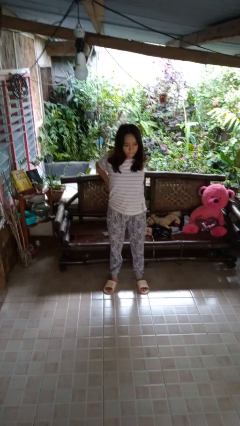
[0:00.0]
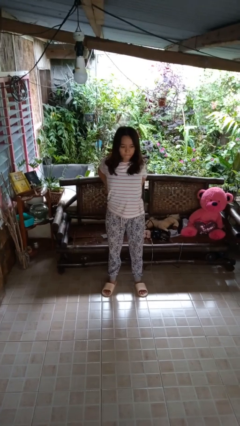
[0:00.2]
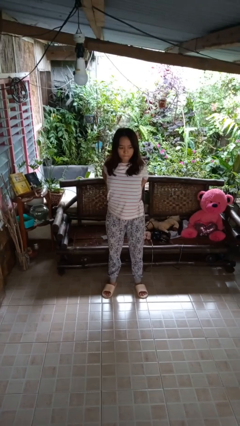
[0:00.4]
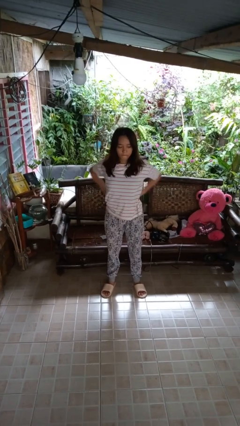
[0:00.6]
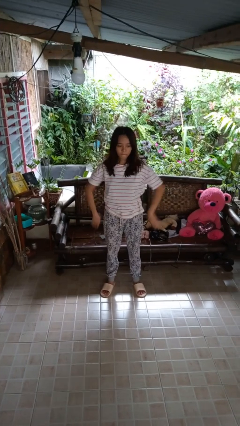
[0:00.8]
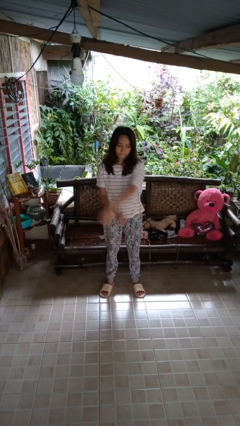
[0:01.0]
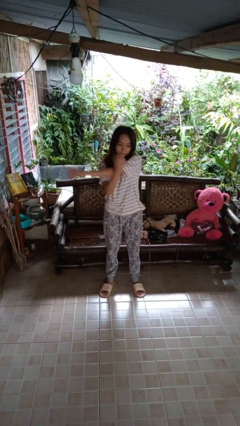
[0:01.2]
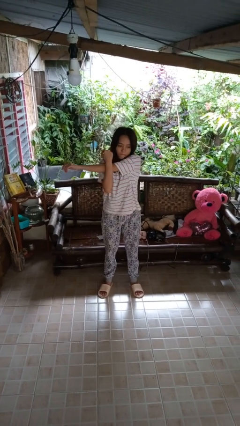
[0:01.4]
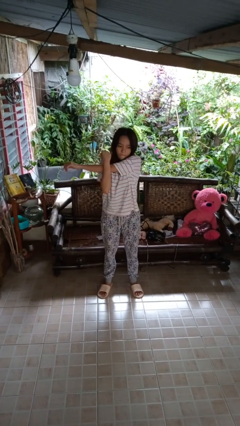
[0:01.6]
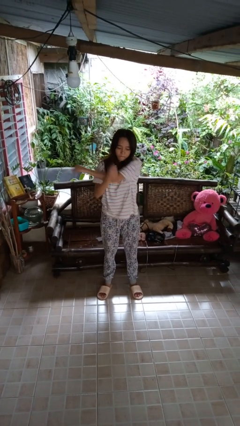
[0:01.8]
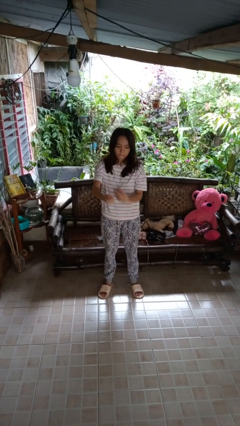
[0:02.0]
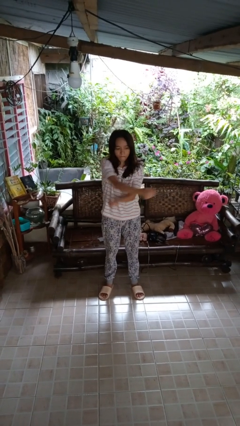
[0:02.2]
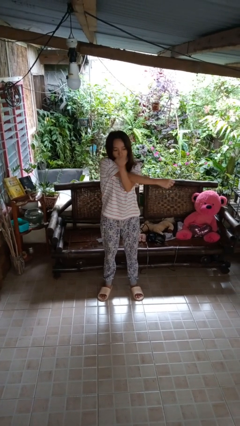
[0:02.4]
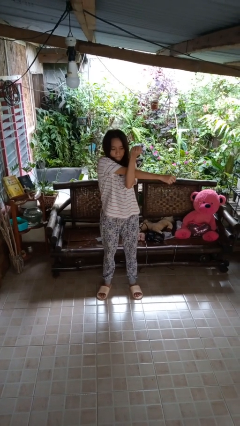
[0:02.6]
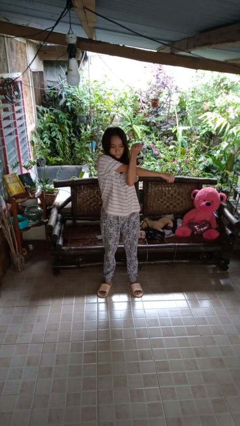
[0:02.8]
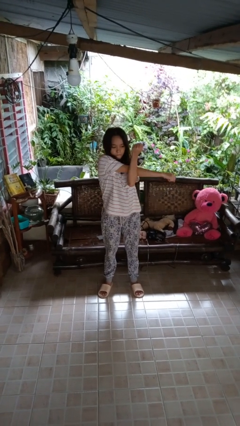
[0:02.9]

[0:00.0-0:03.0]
person stretches arms to side

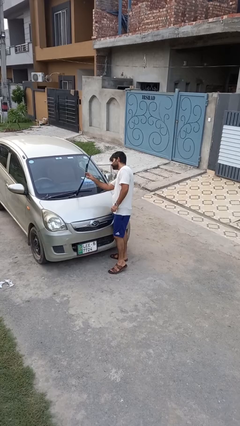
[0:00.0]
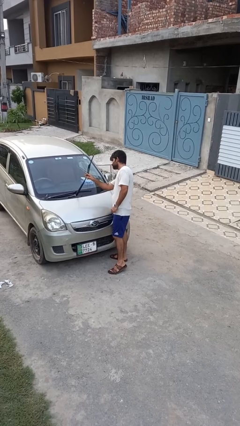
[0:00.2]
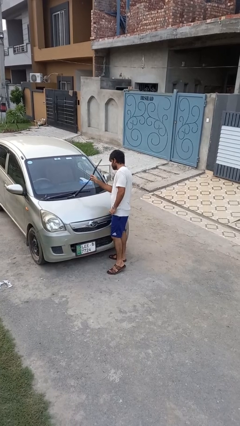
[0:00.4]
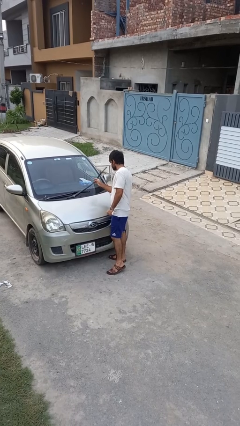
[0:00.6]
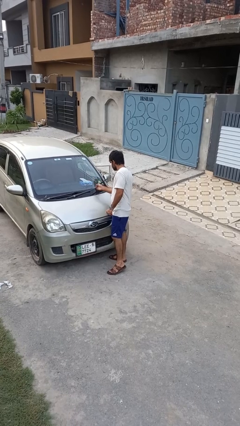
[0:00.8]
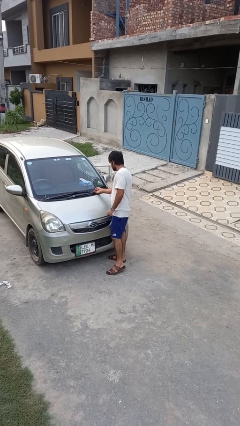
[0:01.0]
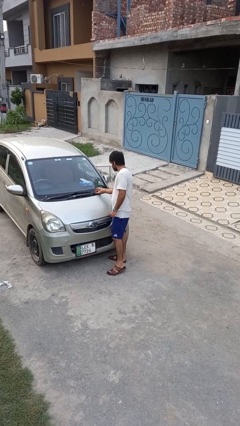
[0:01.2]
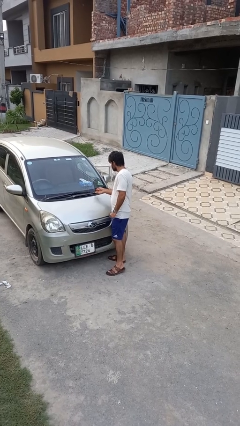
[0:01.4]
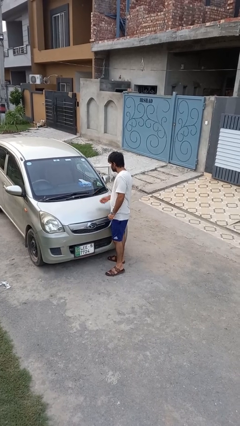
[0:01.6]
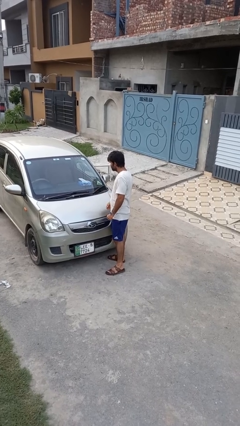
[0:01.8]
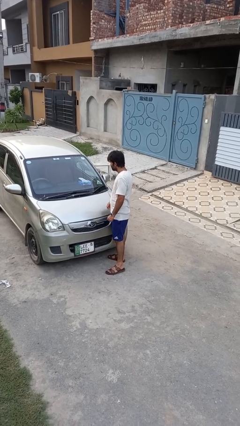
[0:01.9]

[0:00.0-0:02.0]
person flips down car wipers

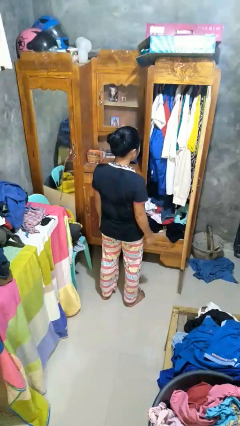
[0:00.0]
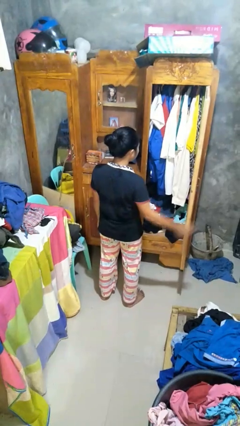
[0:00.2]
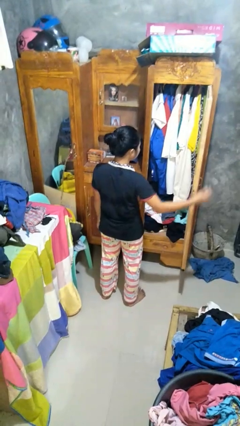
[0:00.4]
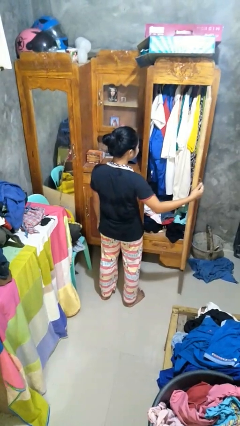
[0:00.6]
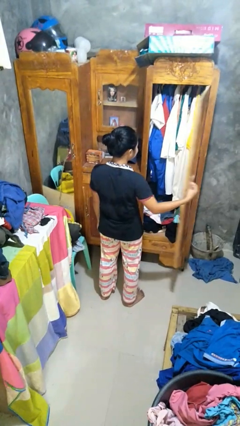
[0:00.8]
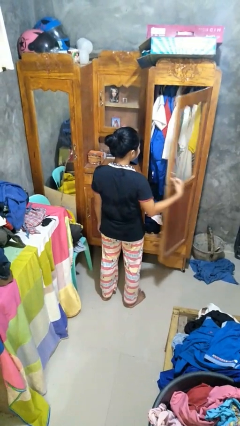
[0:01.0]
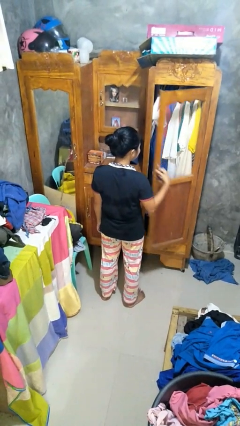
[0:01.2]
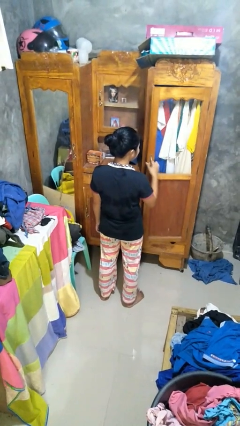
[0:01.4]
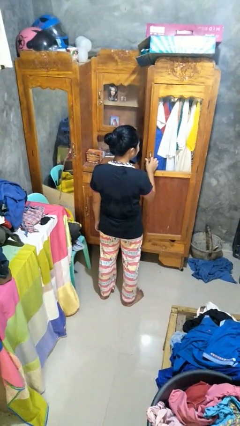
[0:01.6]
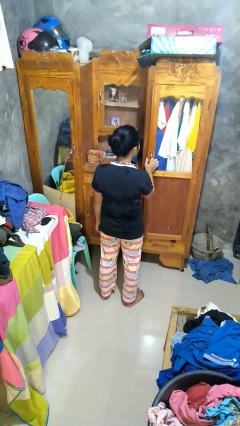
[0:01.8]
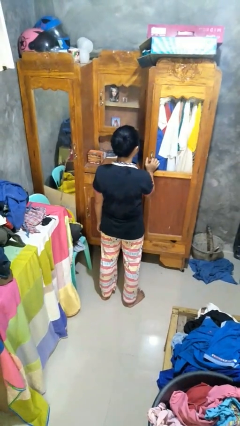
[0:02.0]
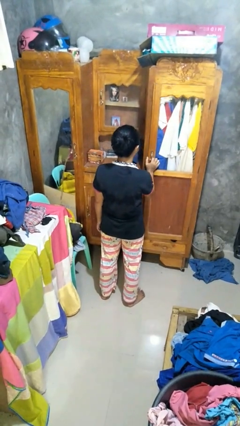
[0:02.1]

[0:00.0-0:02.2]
person closes closet door

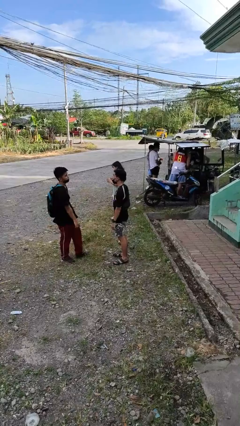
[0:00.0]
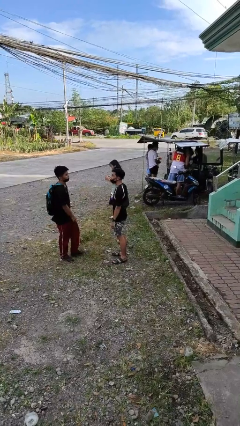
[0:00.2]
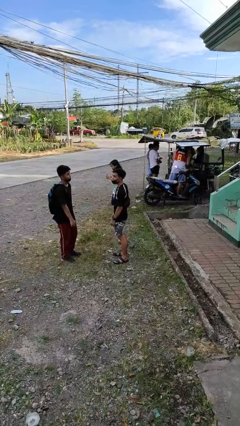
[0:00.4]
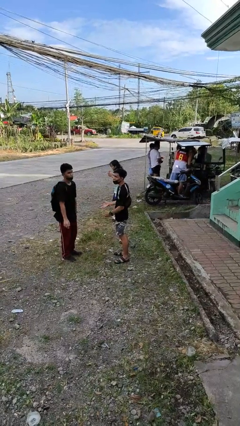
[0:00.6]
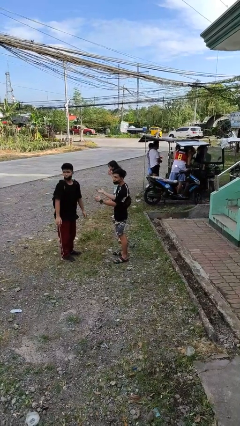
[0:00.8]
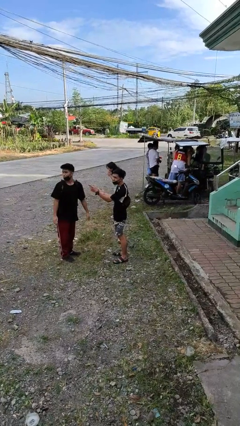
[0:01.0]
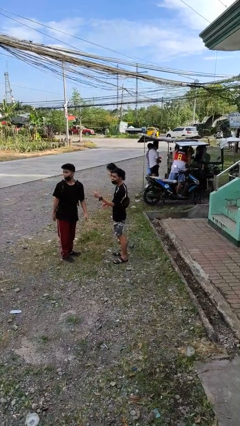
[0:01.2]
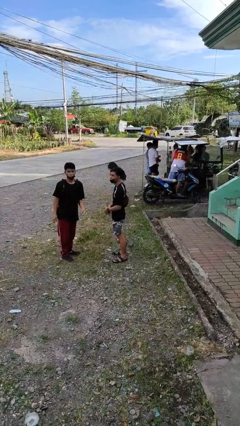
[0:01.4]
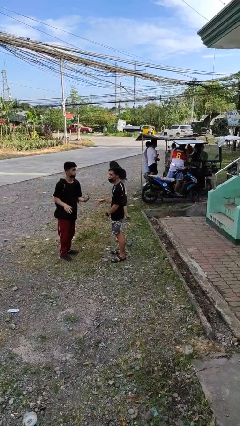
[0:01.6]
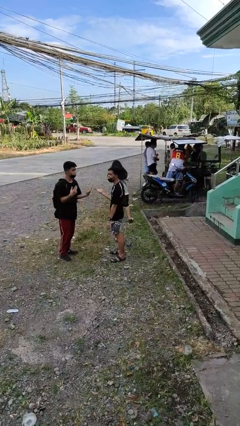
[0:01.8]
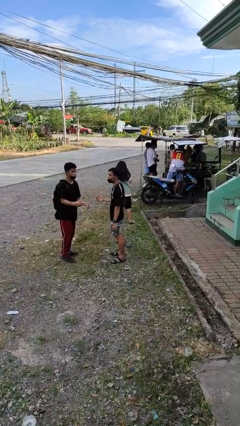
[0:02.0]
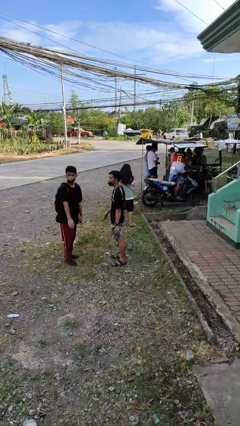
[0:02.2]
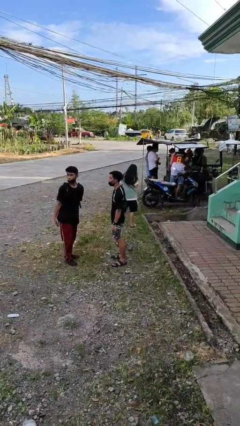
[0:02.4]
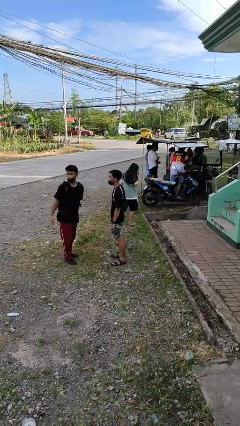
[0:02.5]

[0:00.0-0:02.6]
person talks to person

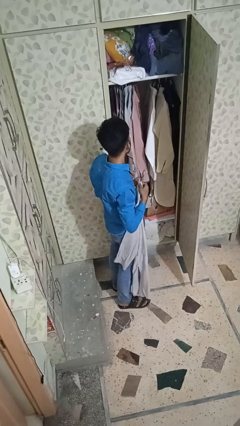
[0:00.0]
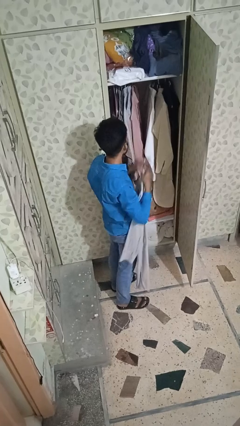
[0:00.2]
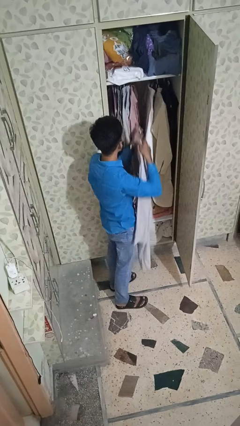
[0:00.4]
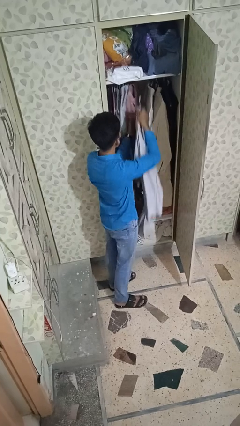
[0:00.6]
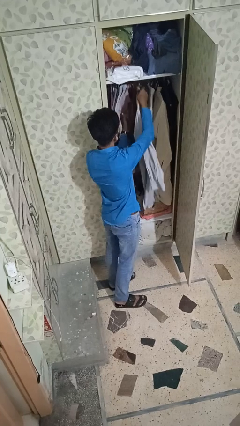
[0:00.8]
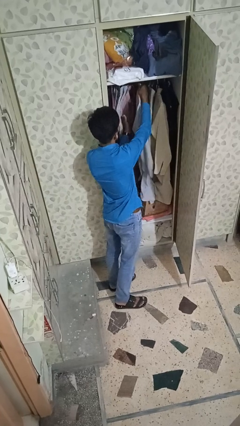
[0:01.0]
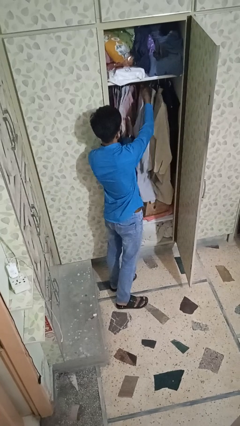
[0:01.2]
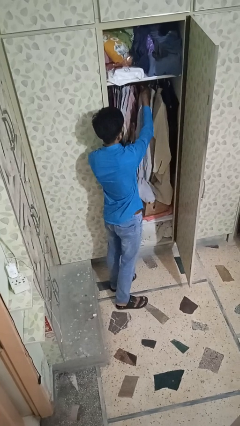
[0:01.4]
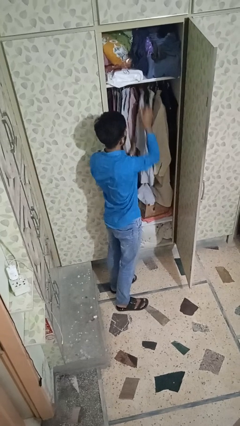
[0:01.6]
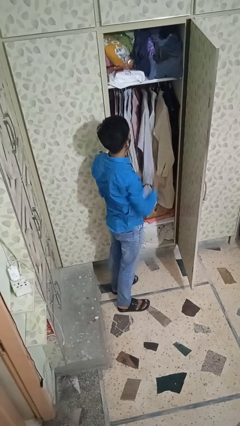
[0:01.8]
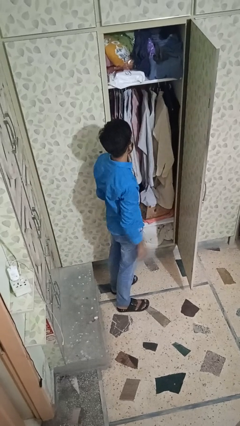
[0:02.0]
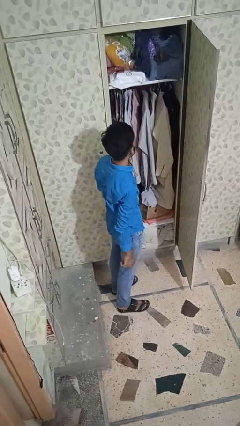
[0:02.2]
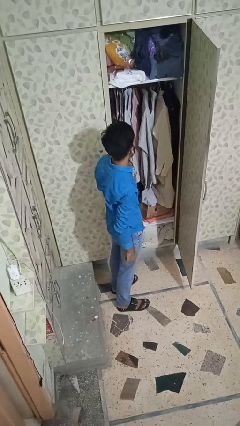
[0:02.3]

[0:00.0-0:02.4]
person puts clothes into closet

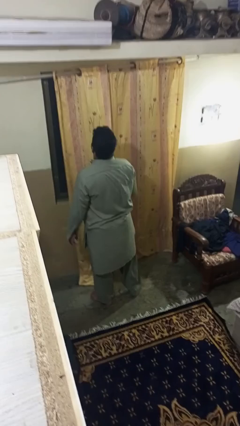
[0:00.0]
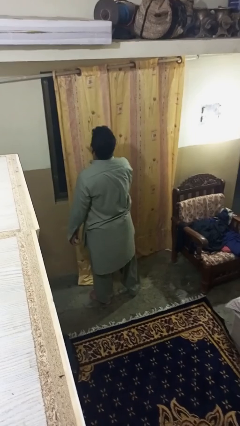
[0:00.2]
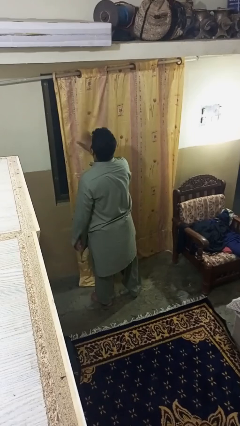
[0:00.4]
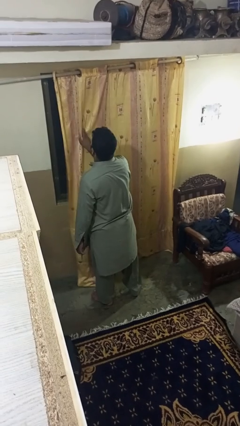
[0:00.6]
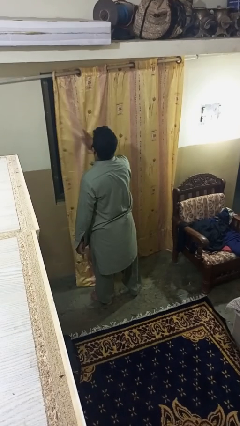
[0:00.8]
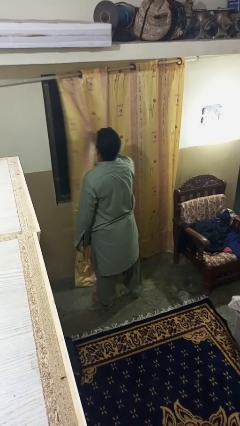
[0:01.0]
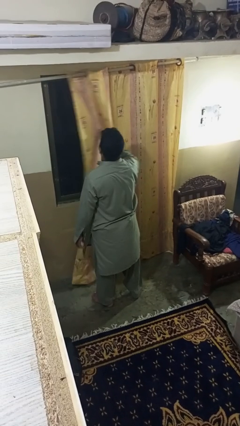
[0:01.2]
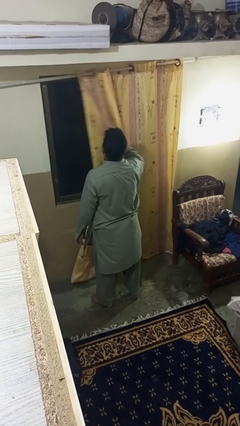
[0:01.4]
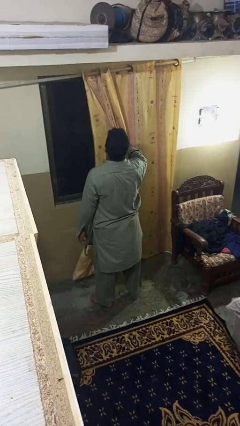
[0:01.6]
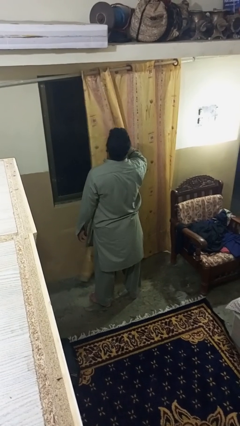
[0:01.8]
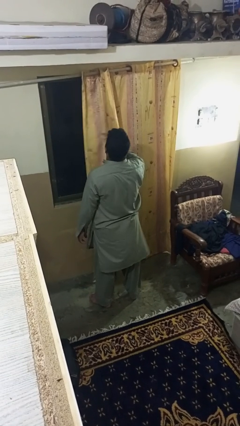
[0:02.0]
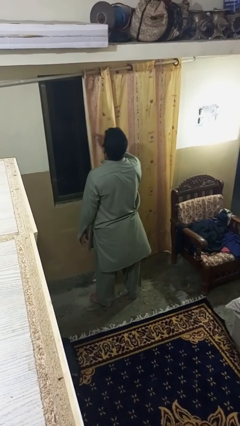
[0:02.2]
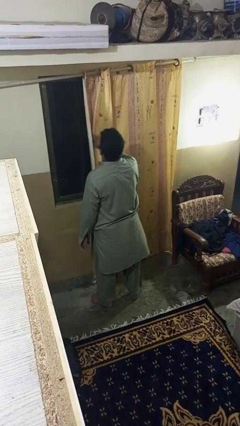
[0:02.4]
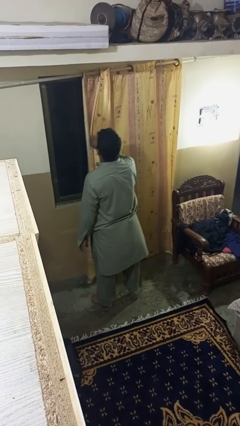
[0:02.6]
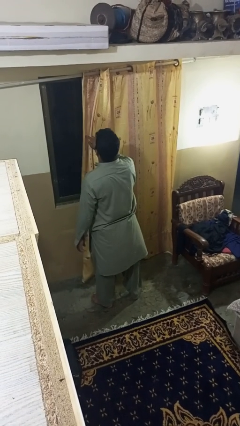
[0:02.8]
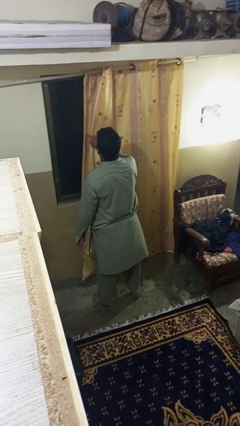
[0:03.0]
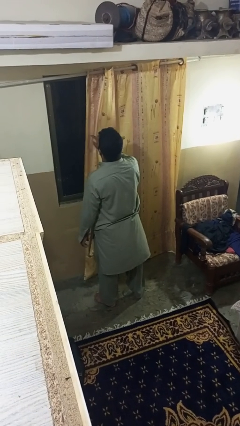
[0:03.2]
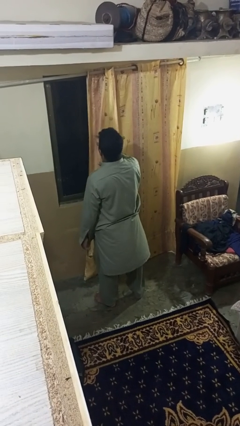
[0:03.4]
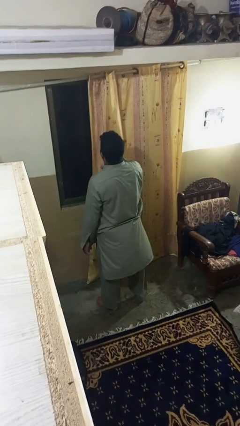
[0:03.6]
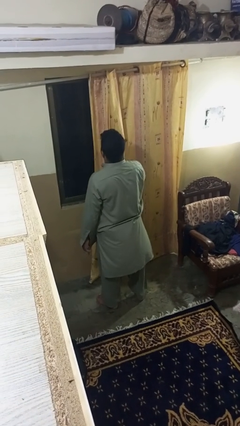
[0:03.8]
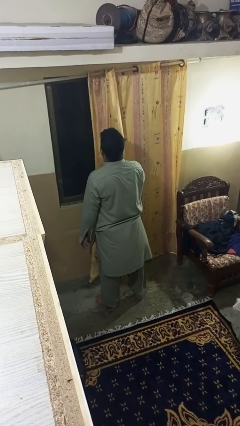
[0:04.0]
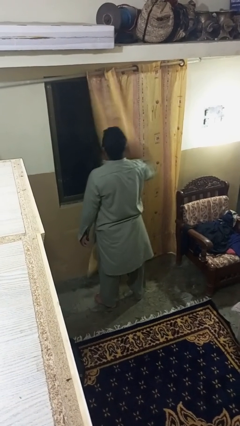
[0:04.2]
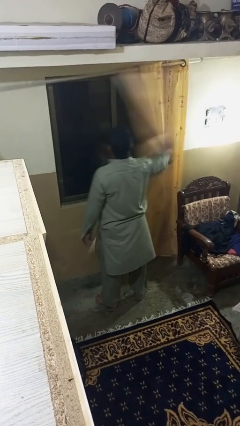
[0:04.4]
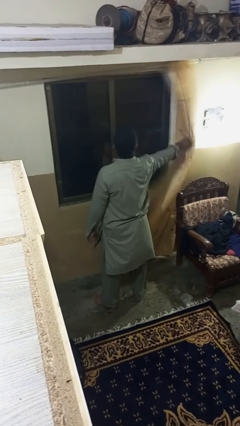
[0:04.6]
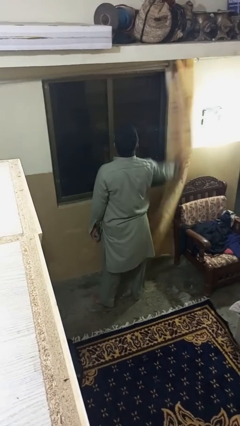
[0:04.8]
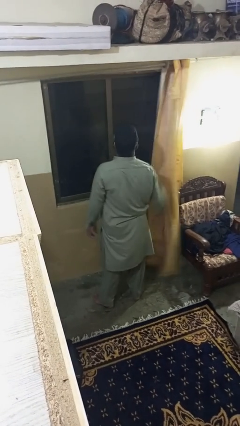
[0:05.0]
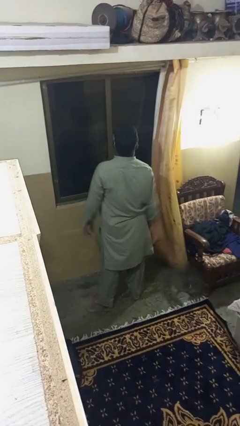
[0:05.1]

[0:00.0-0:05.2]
person opens curtains
